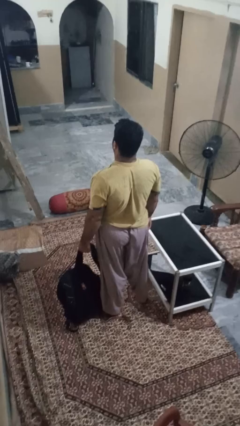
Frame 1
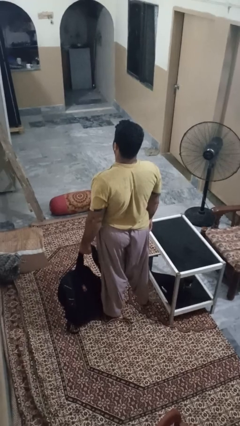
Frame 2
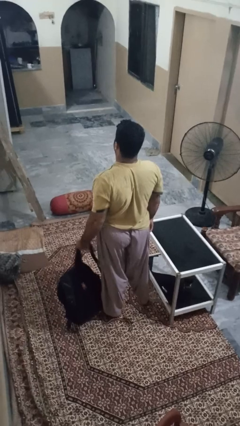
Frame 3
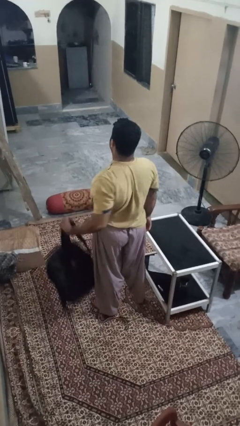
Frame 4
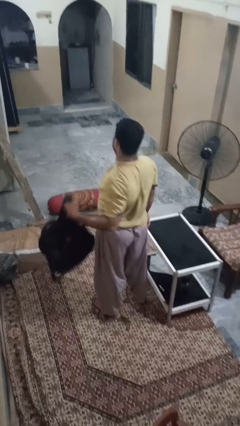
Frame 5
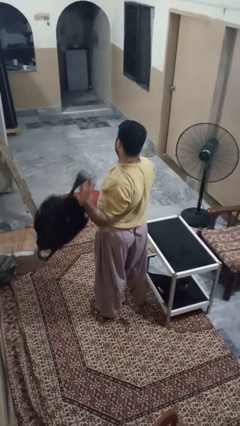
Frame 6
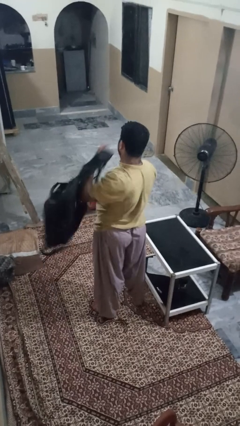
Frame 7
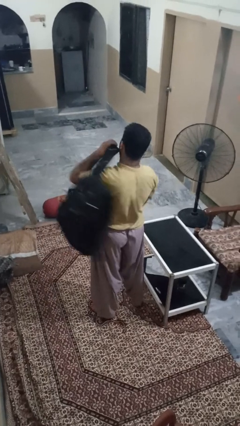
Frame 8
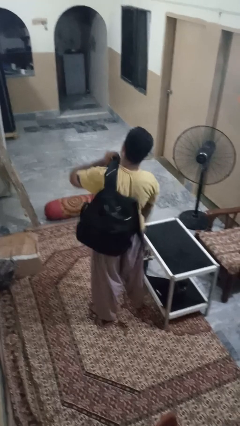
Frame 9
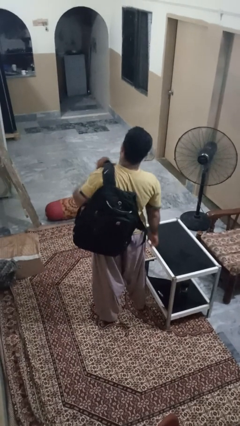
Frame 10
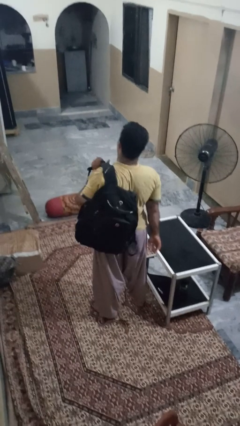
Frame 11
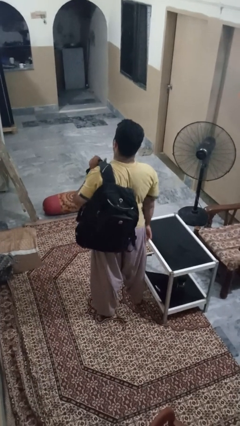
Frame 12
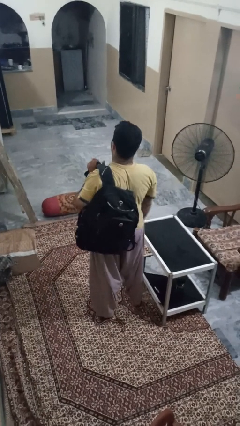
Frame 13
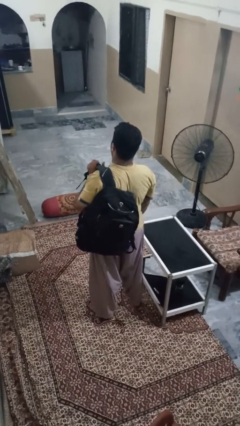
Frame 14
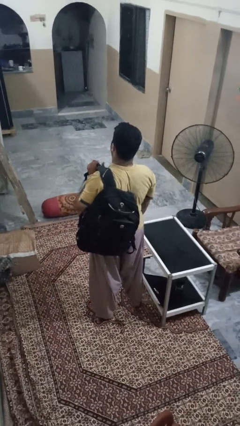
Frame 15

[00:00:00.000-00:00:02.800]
person puts on backpack

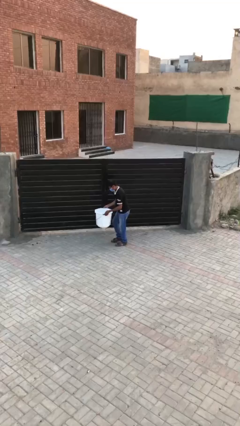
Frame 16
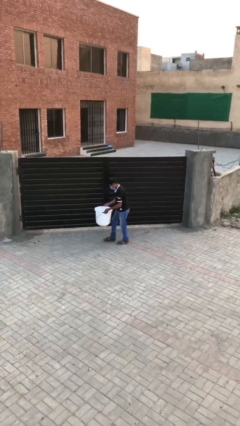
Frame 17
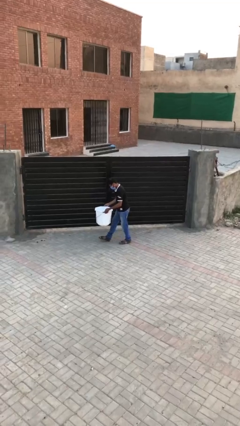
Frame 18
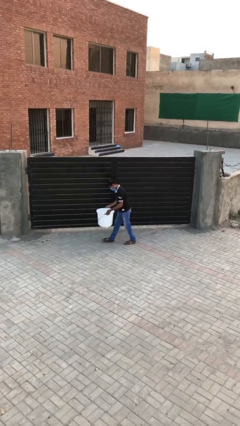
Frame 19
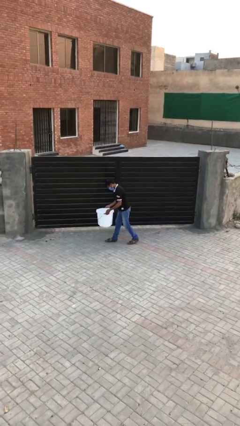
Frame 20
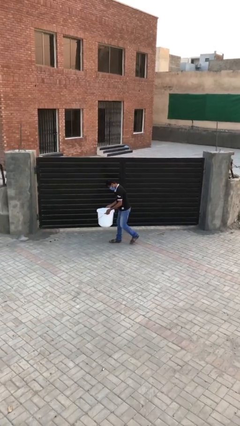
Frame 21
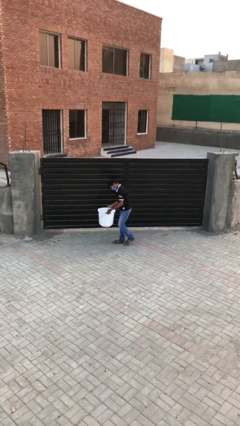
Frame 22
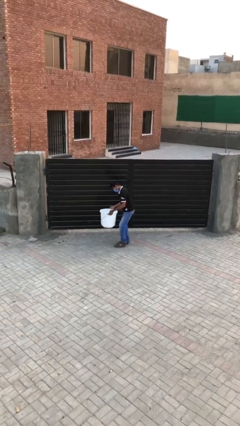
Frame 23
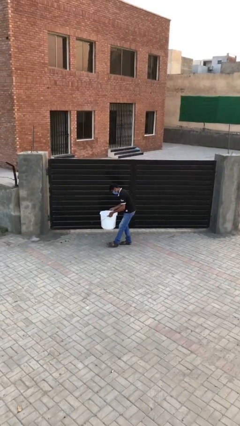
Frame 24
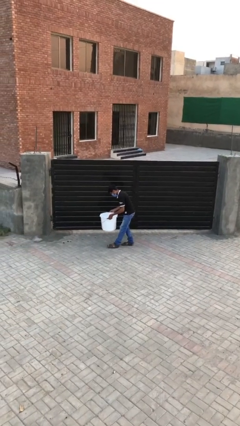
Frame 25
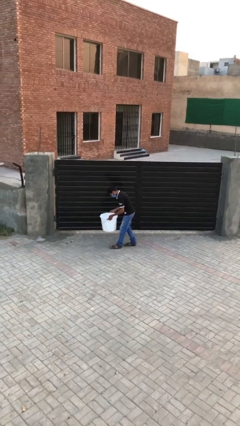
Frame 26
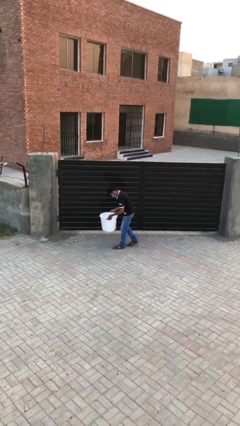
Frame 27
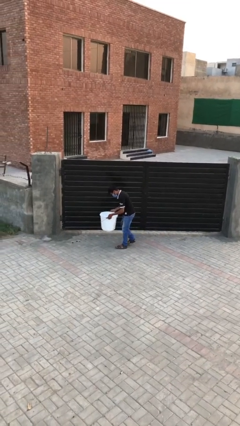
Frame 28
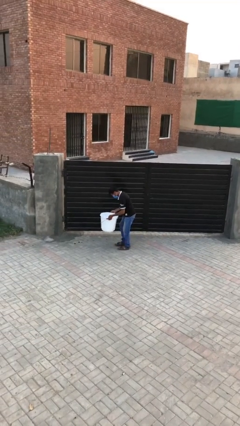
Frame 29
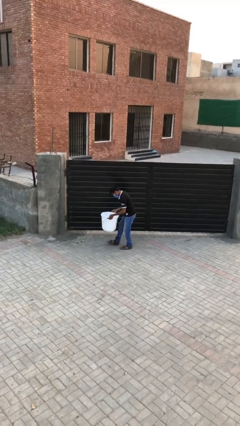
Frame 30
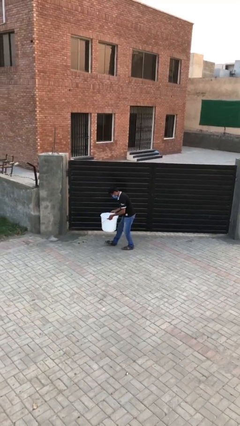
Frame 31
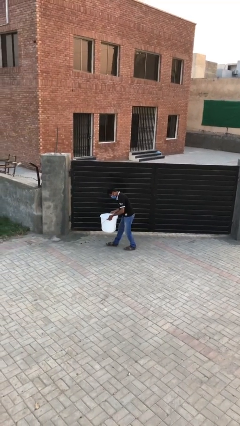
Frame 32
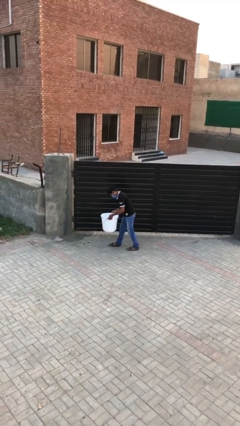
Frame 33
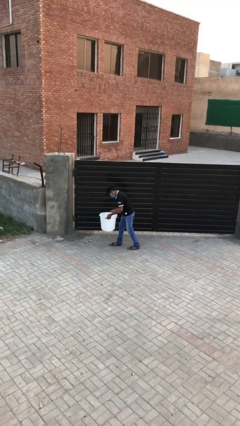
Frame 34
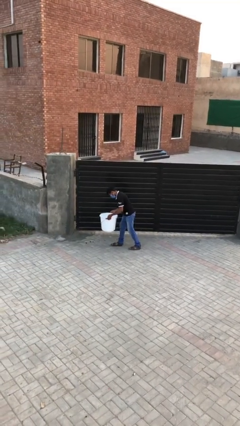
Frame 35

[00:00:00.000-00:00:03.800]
person carries heavy object

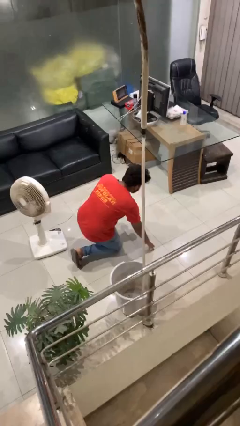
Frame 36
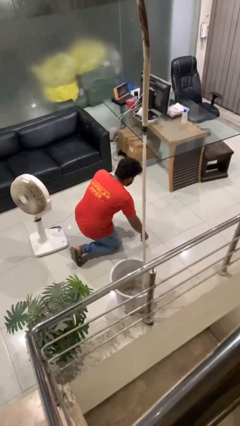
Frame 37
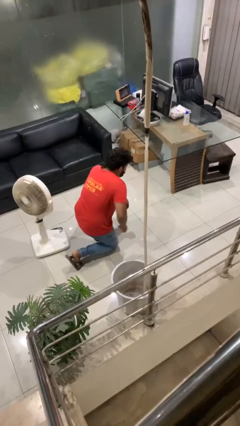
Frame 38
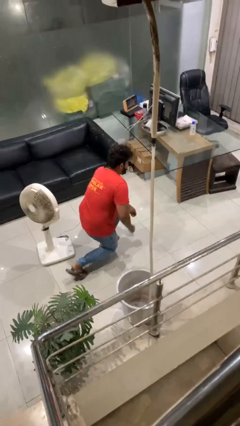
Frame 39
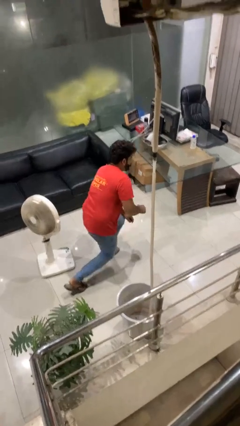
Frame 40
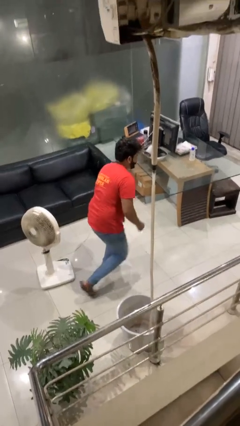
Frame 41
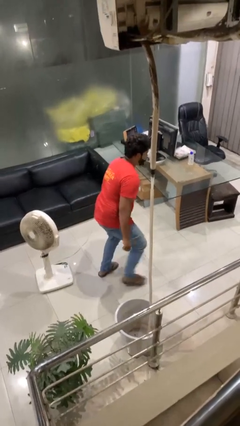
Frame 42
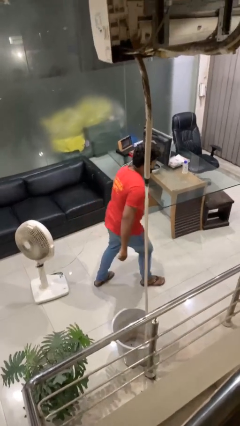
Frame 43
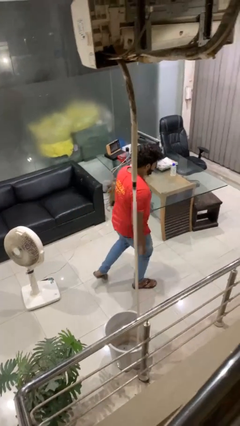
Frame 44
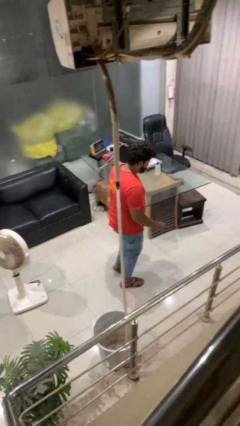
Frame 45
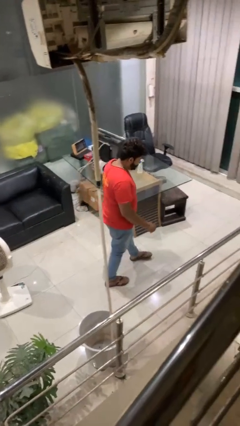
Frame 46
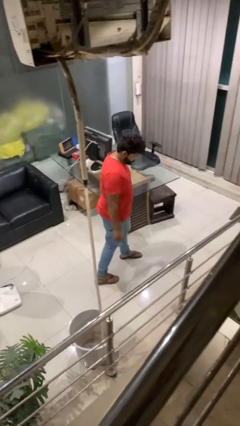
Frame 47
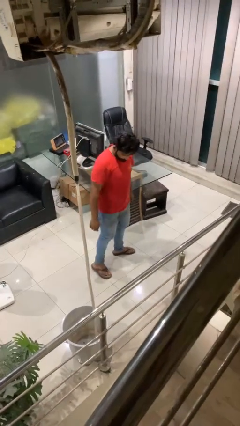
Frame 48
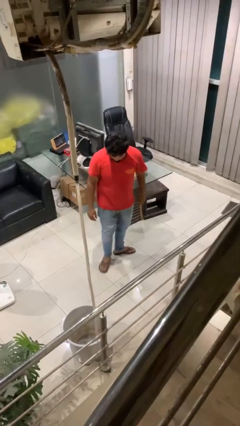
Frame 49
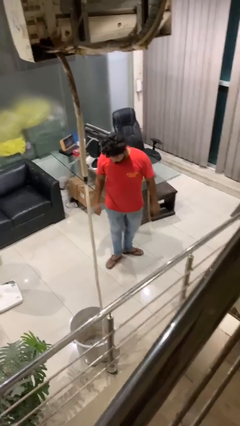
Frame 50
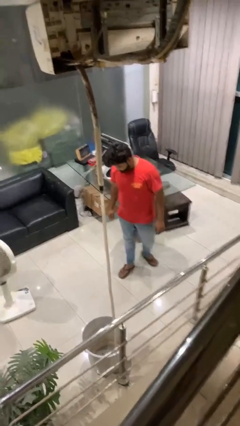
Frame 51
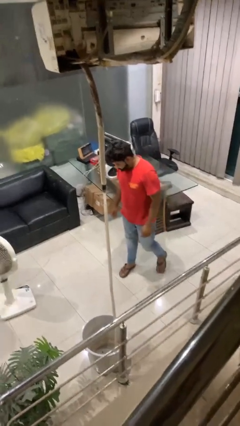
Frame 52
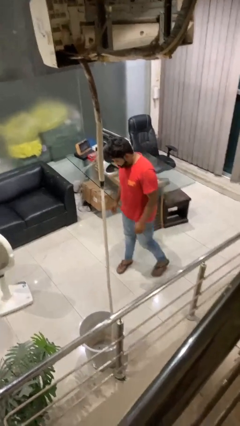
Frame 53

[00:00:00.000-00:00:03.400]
person stands up from floor

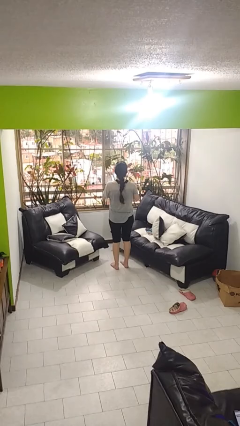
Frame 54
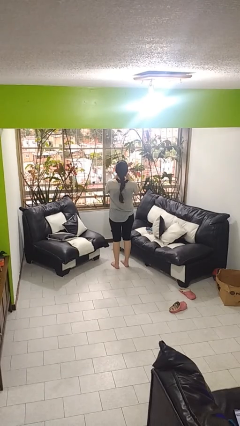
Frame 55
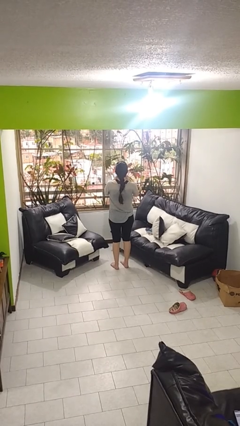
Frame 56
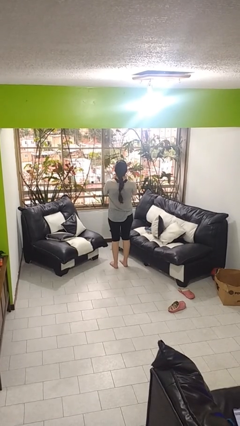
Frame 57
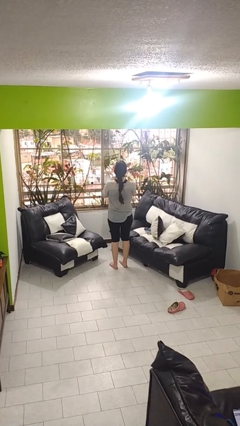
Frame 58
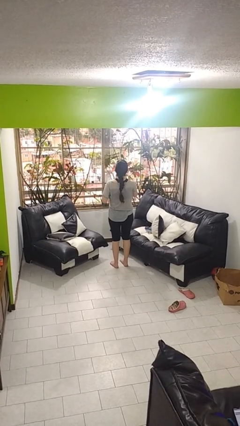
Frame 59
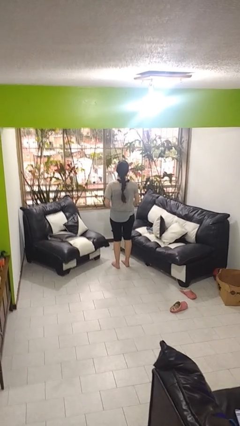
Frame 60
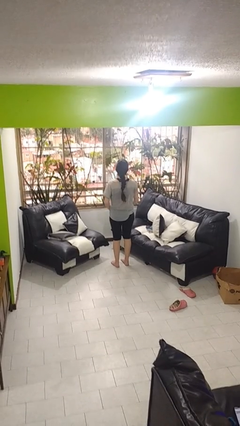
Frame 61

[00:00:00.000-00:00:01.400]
person wipes mouth with napkin

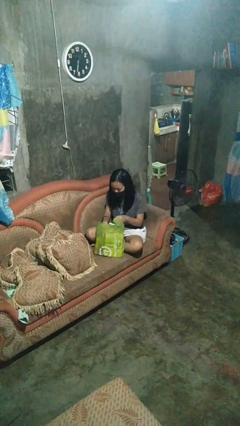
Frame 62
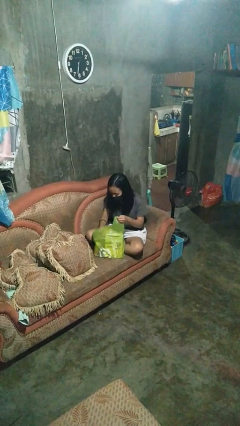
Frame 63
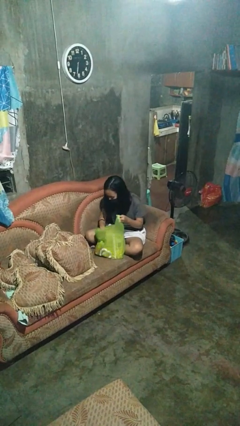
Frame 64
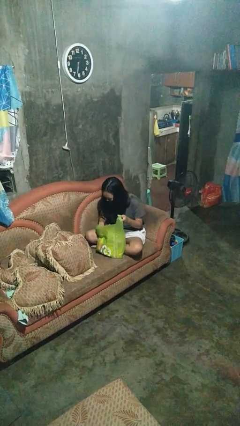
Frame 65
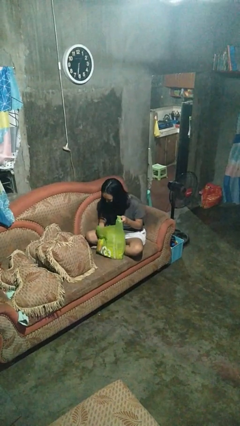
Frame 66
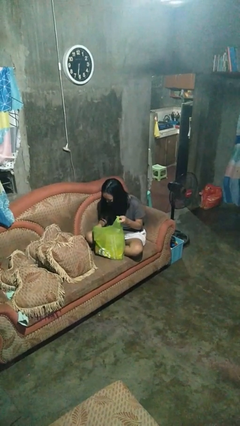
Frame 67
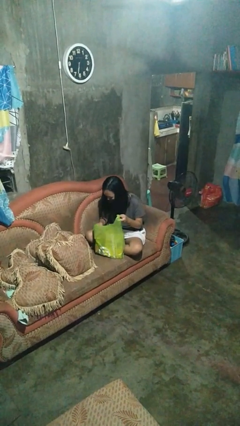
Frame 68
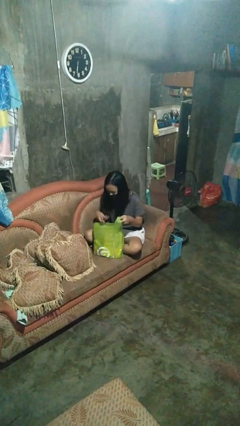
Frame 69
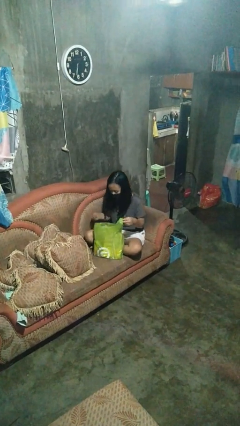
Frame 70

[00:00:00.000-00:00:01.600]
person searches in bag

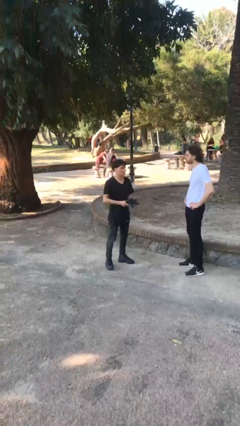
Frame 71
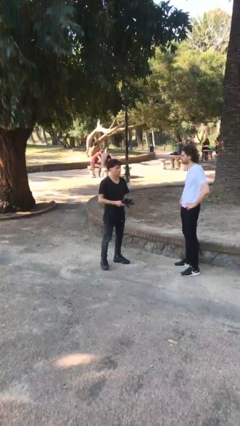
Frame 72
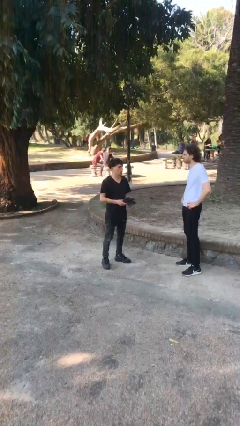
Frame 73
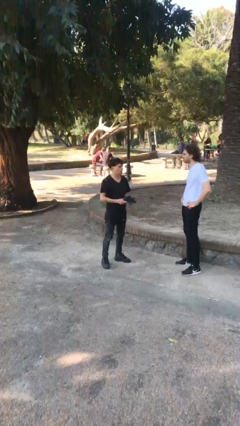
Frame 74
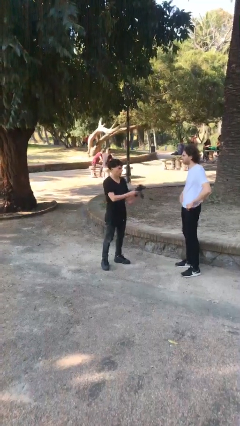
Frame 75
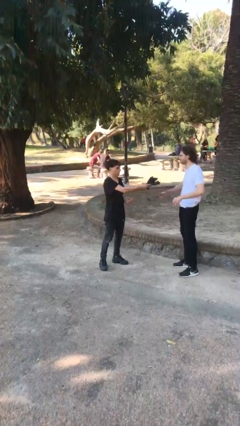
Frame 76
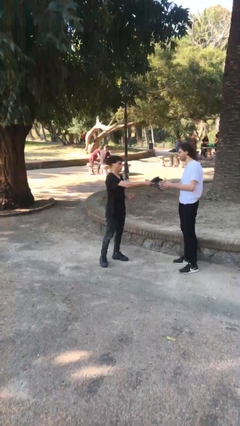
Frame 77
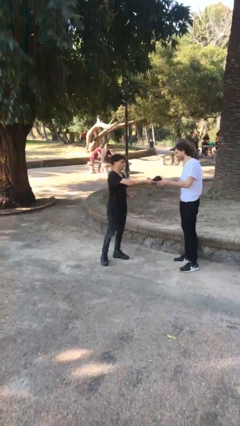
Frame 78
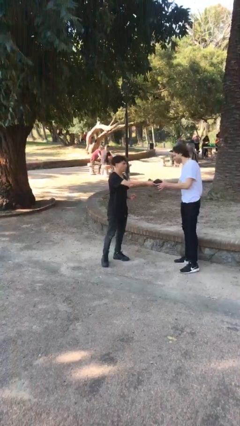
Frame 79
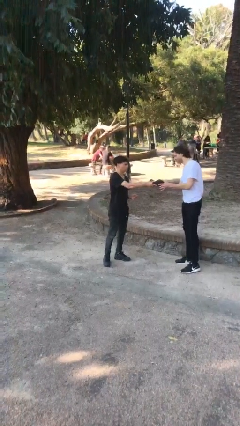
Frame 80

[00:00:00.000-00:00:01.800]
person transfers object to person

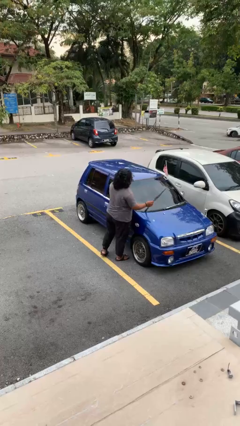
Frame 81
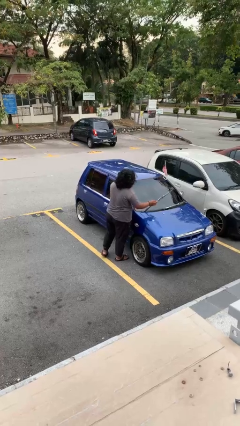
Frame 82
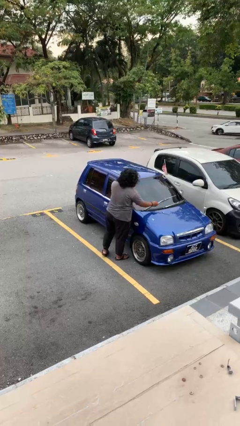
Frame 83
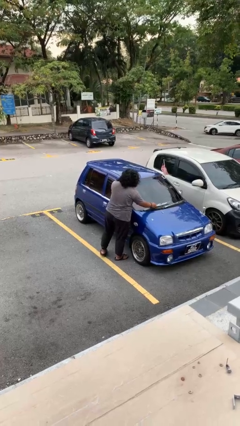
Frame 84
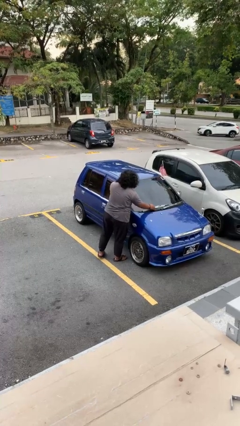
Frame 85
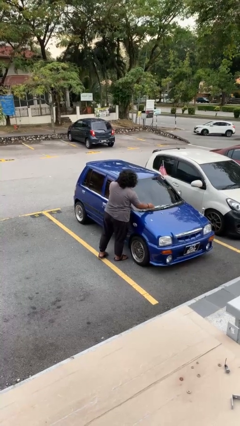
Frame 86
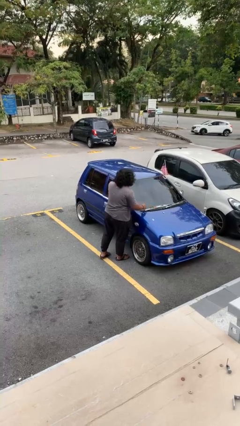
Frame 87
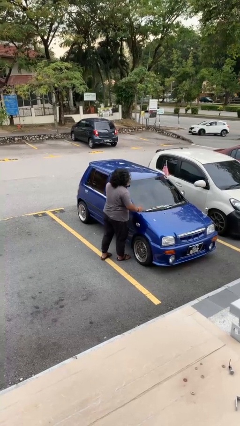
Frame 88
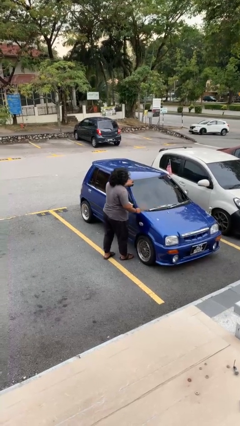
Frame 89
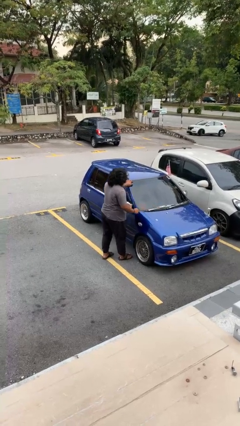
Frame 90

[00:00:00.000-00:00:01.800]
person flips down car wipers

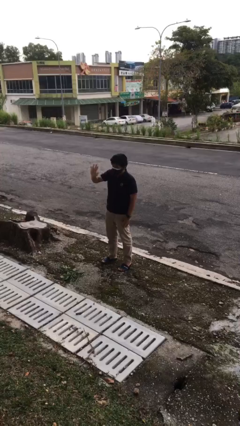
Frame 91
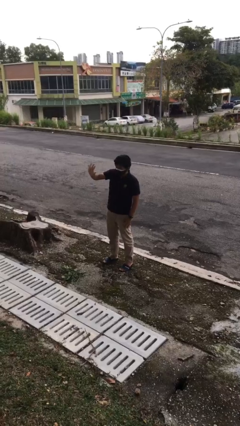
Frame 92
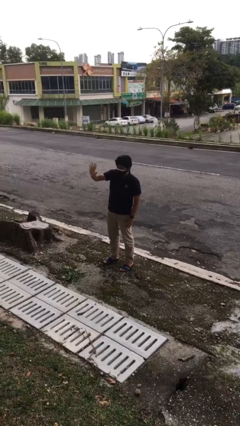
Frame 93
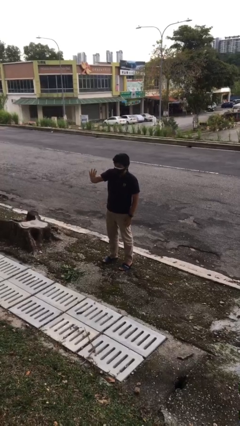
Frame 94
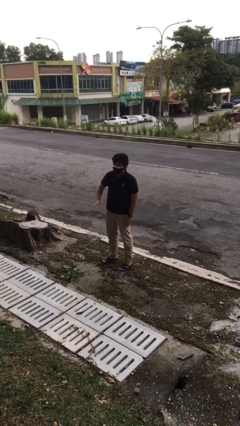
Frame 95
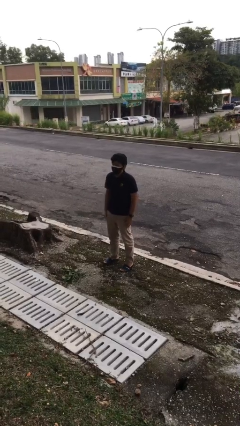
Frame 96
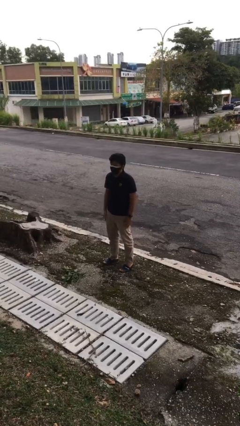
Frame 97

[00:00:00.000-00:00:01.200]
person gestures number five
